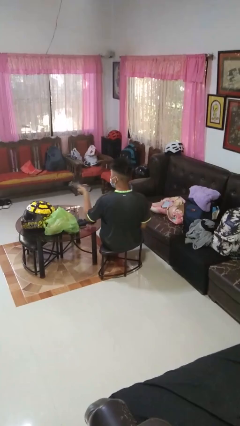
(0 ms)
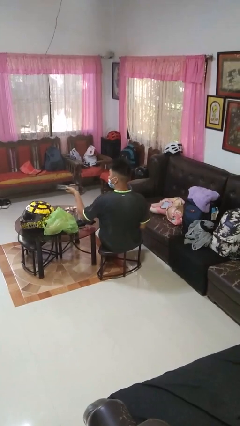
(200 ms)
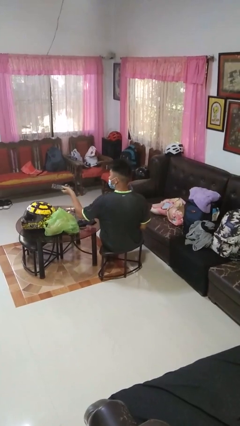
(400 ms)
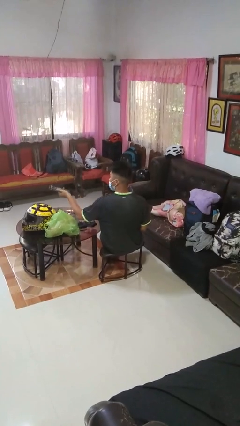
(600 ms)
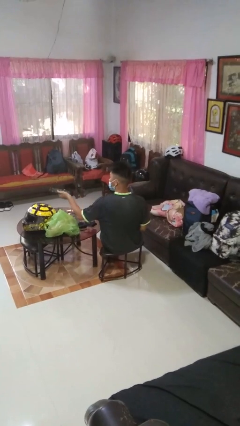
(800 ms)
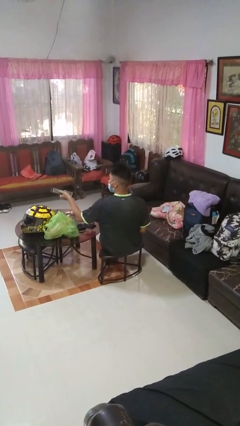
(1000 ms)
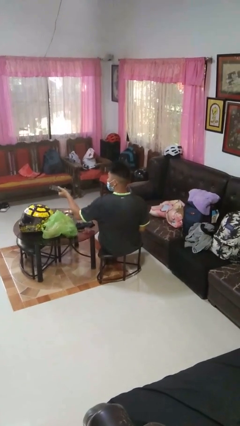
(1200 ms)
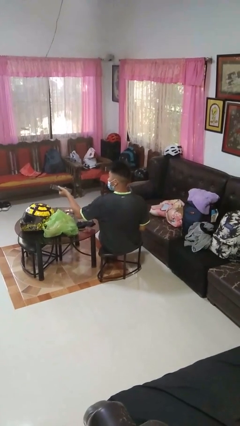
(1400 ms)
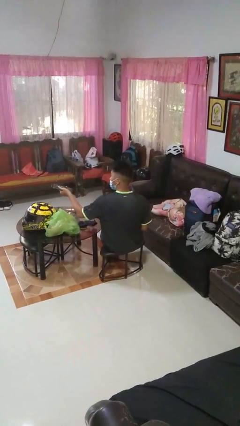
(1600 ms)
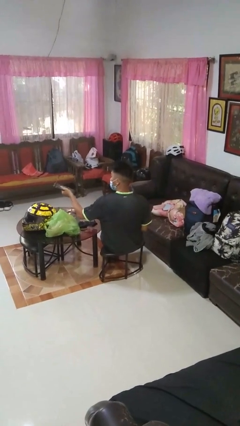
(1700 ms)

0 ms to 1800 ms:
person uses television remote

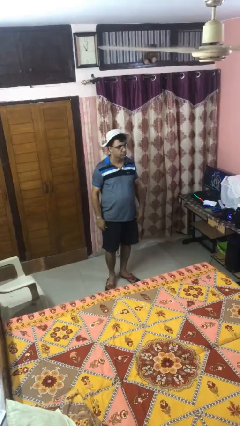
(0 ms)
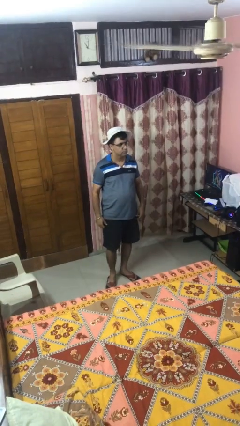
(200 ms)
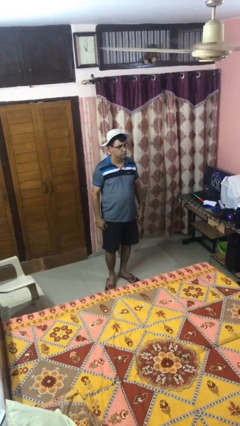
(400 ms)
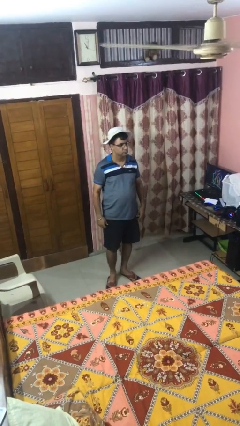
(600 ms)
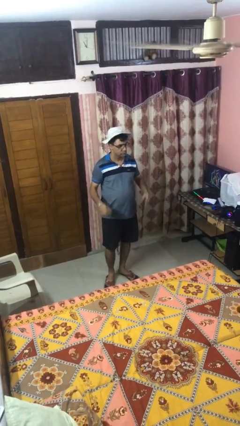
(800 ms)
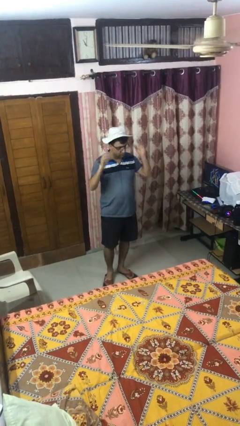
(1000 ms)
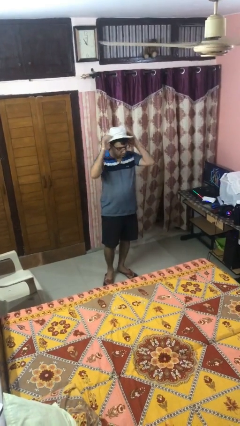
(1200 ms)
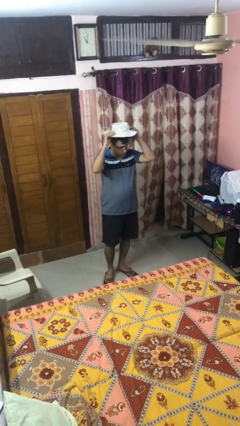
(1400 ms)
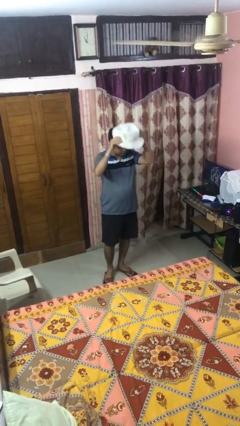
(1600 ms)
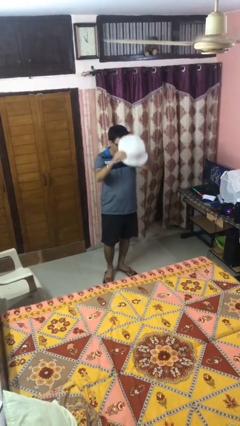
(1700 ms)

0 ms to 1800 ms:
person takes off hat

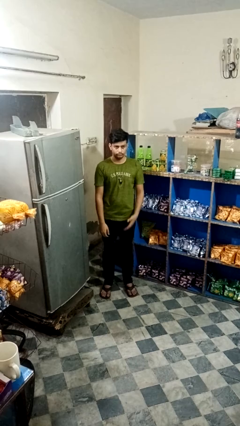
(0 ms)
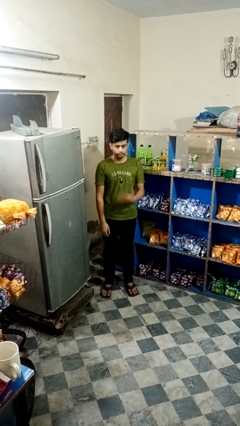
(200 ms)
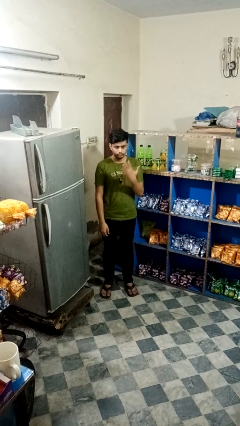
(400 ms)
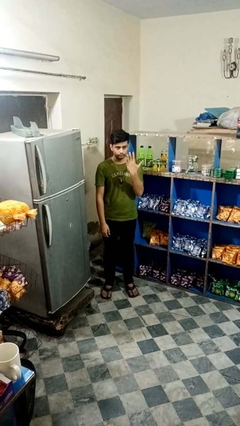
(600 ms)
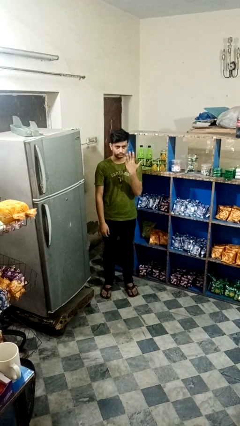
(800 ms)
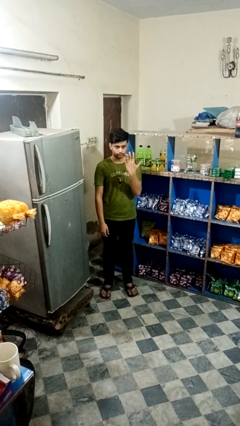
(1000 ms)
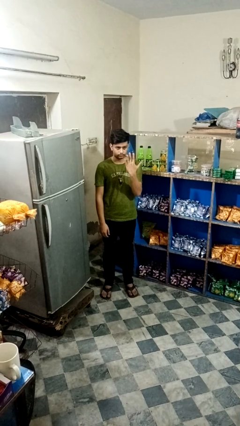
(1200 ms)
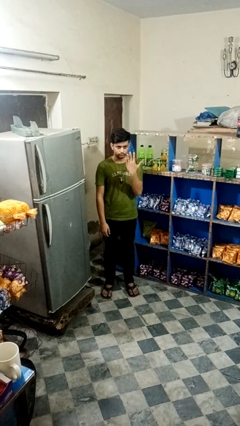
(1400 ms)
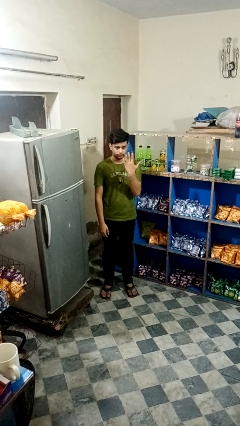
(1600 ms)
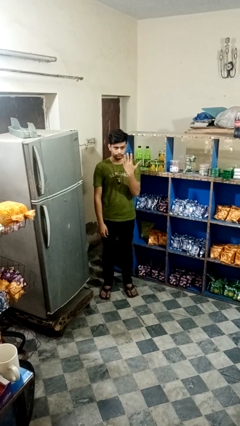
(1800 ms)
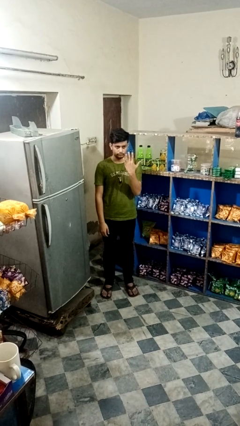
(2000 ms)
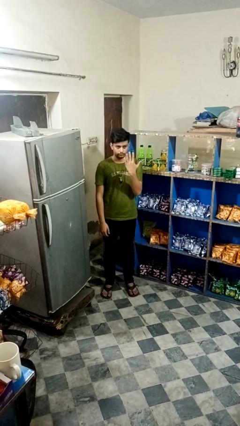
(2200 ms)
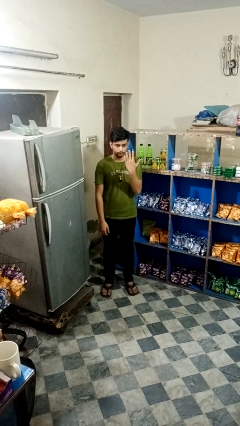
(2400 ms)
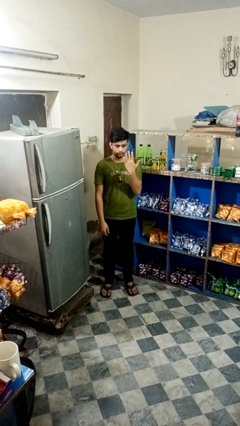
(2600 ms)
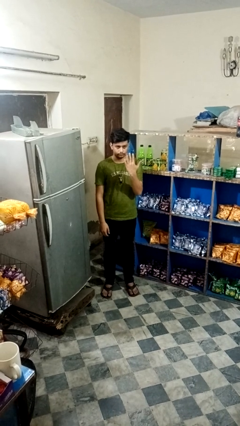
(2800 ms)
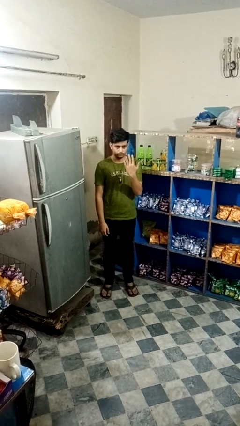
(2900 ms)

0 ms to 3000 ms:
person gestures number five

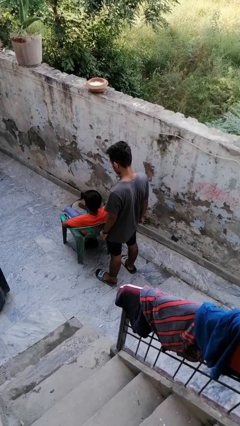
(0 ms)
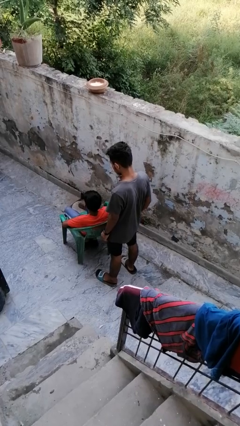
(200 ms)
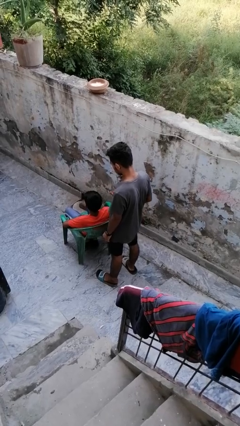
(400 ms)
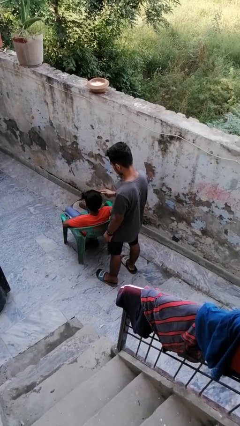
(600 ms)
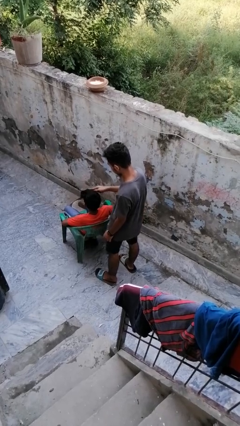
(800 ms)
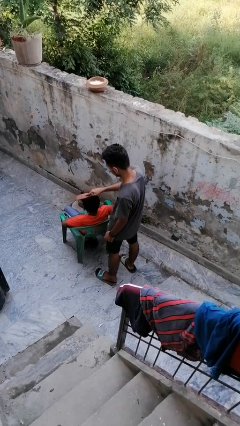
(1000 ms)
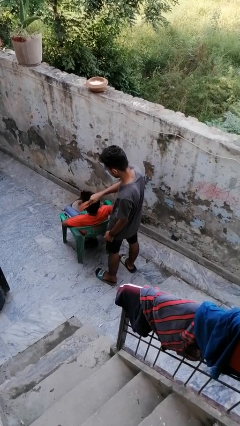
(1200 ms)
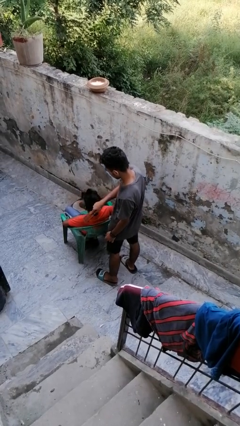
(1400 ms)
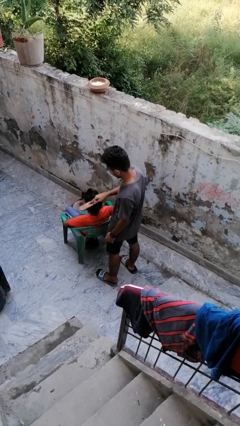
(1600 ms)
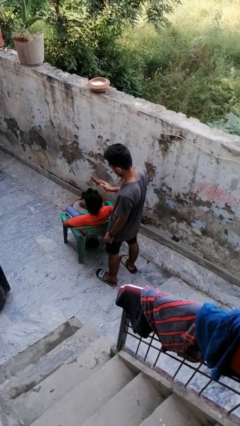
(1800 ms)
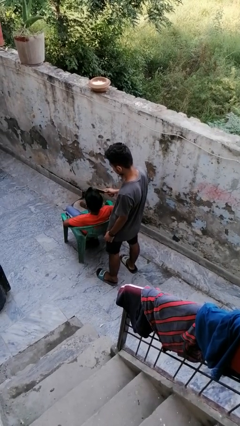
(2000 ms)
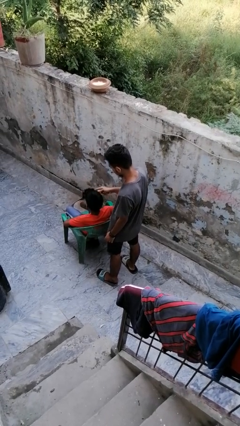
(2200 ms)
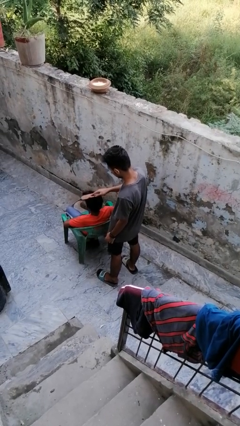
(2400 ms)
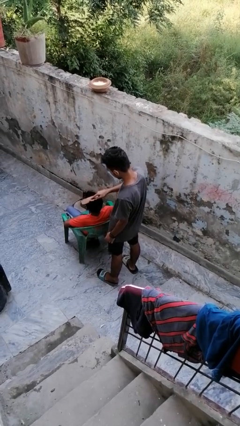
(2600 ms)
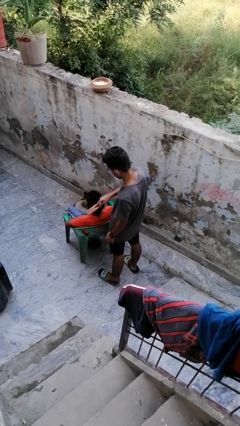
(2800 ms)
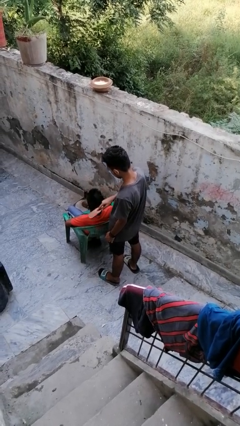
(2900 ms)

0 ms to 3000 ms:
person brushes hair of person

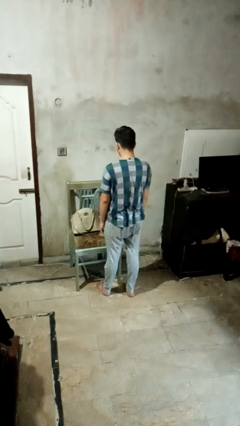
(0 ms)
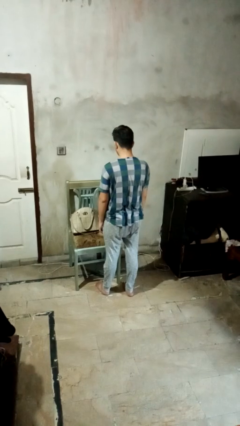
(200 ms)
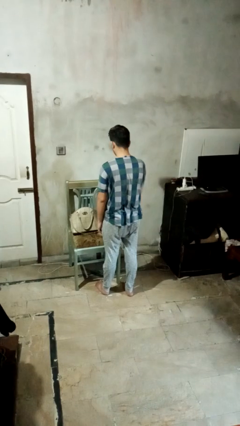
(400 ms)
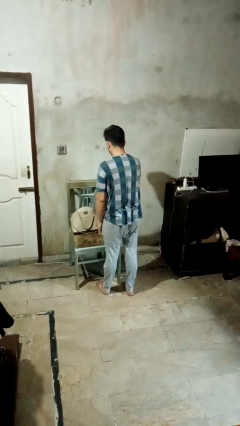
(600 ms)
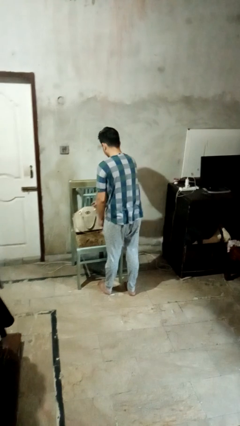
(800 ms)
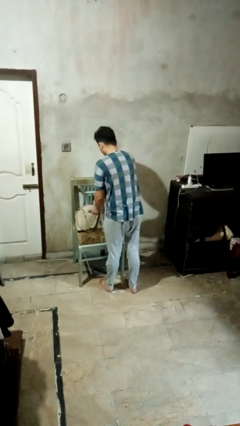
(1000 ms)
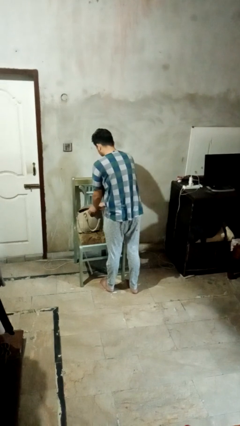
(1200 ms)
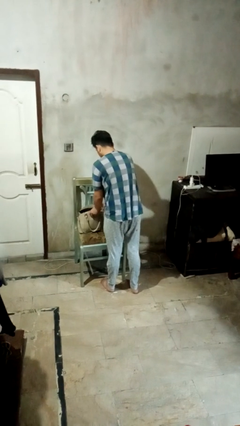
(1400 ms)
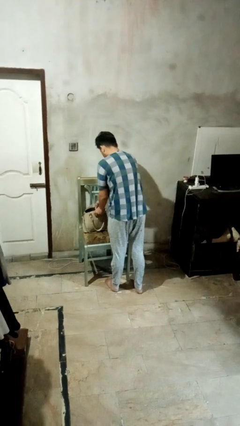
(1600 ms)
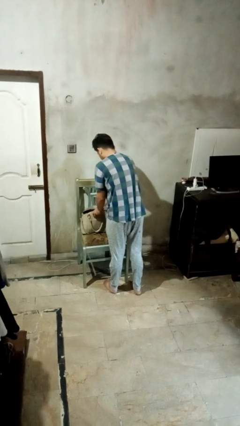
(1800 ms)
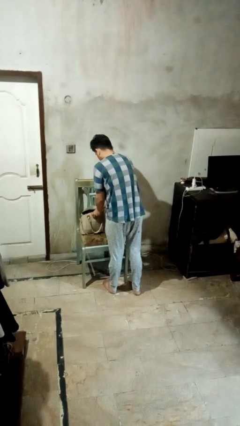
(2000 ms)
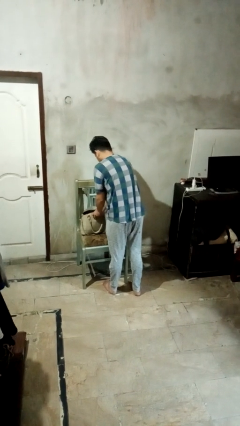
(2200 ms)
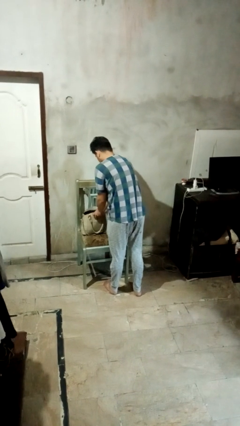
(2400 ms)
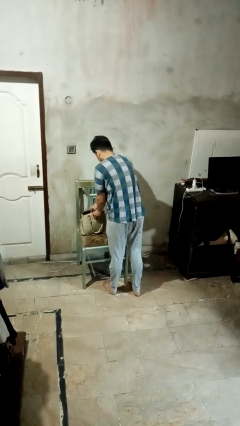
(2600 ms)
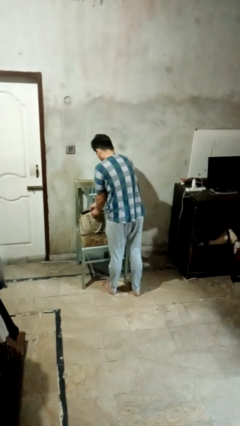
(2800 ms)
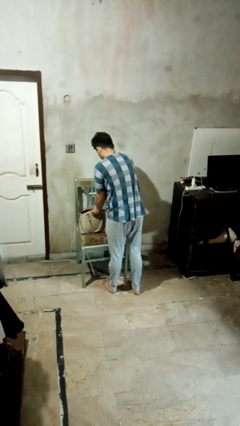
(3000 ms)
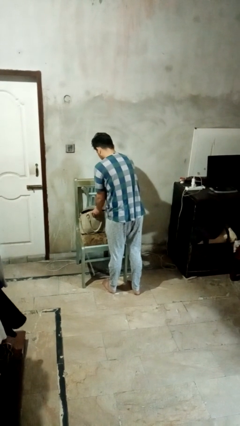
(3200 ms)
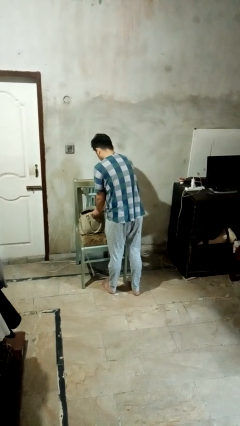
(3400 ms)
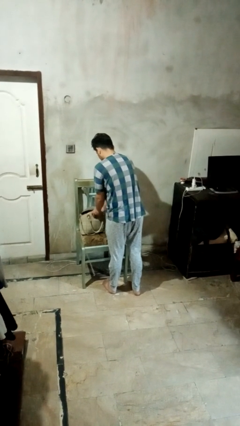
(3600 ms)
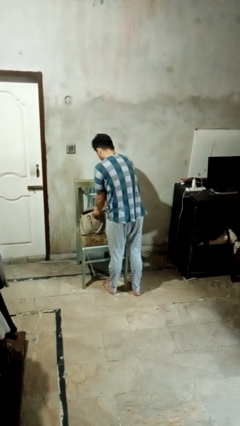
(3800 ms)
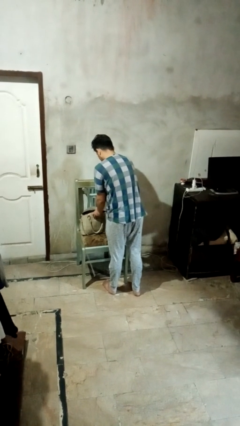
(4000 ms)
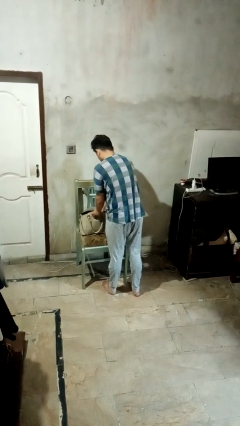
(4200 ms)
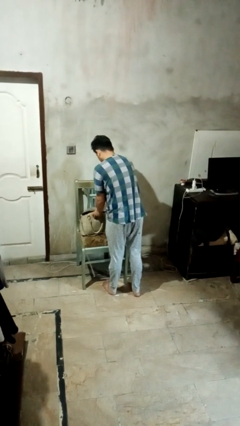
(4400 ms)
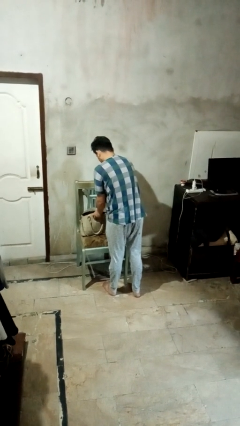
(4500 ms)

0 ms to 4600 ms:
person searches in purse

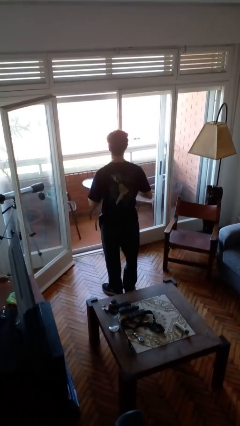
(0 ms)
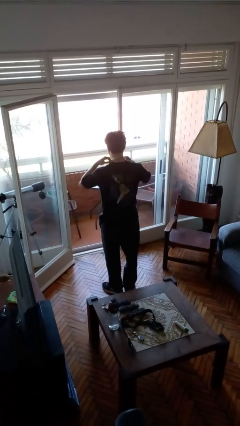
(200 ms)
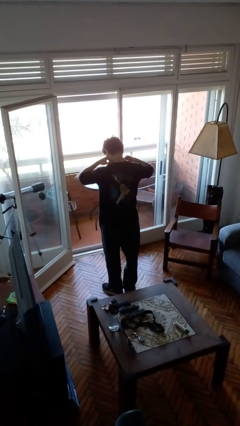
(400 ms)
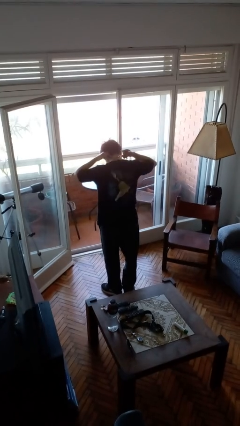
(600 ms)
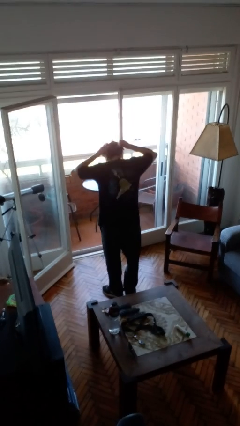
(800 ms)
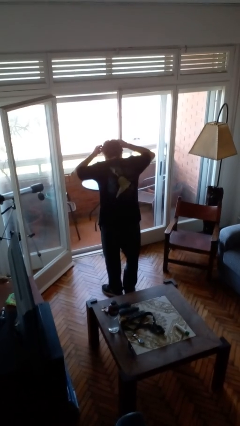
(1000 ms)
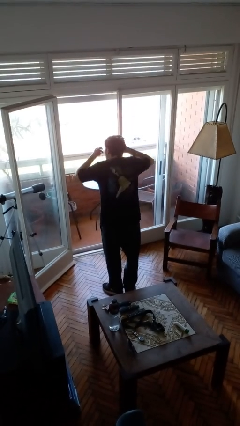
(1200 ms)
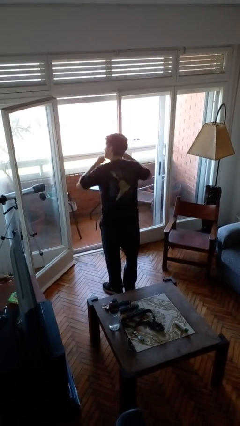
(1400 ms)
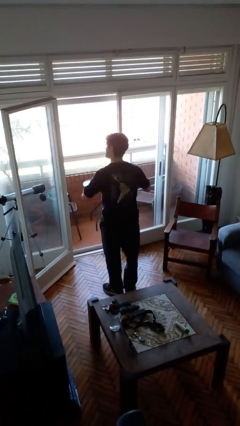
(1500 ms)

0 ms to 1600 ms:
person takes off necklace

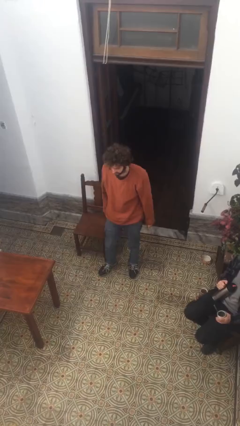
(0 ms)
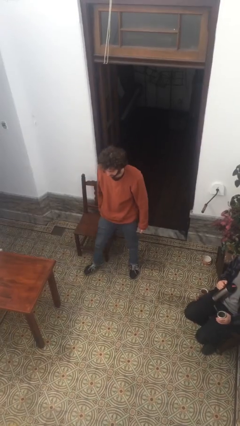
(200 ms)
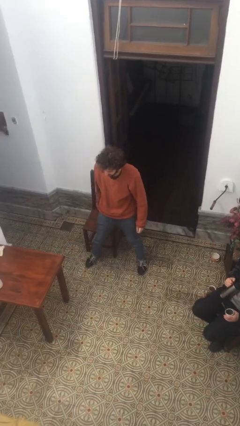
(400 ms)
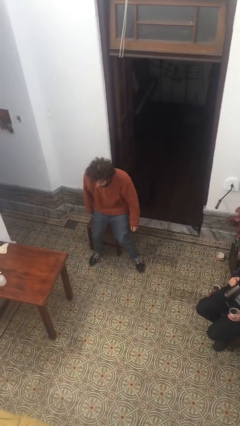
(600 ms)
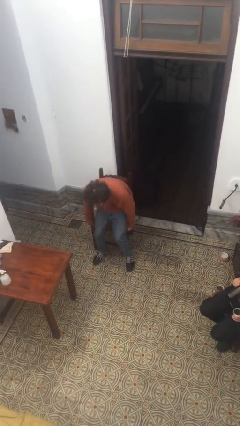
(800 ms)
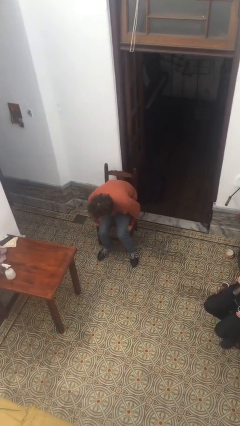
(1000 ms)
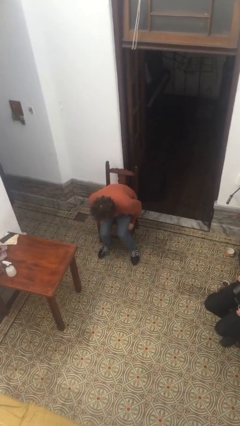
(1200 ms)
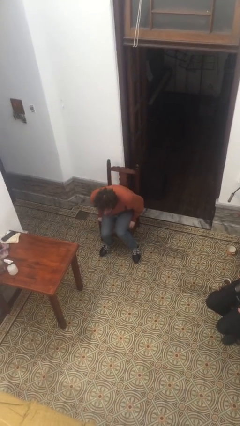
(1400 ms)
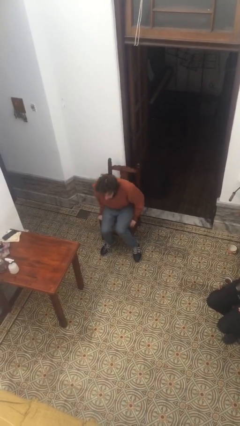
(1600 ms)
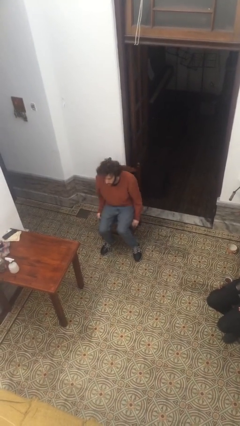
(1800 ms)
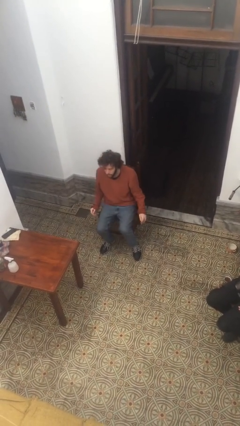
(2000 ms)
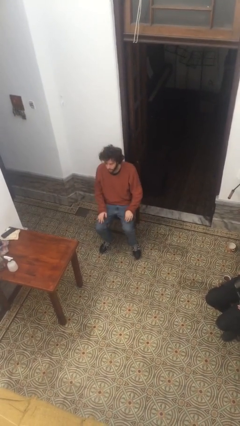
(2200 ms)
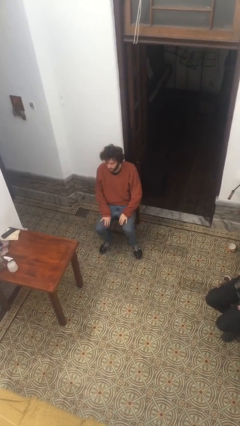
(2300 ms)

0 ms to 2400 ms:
person sits down
